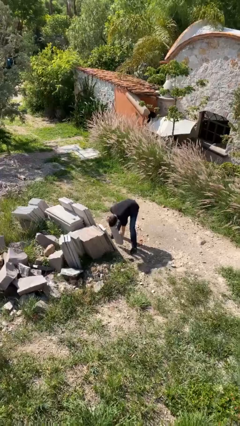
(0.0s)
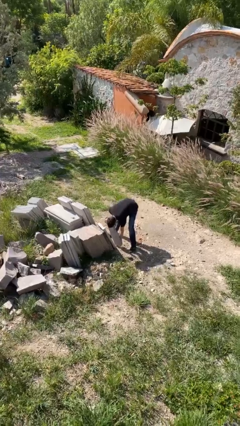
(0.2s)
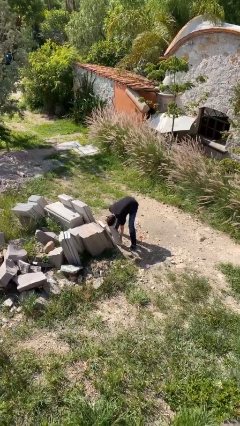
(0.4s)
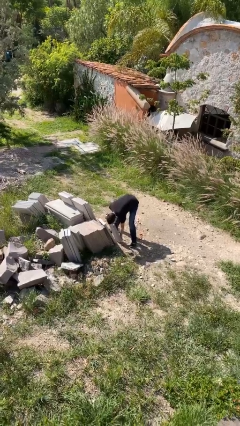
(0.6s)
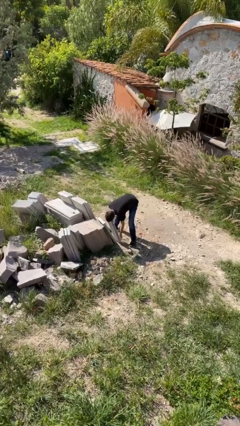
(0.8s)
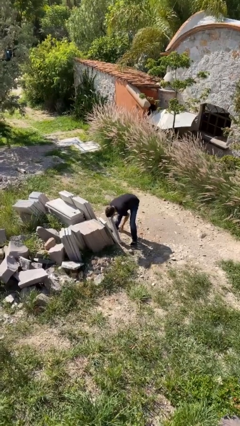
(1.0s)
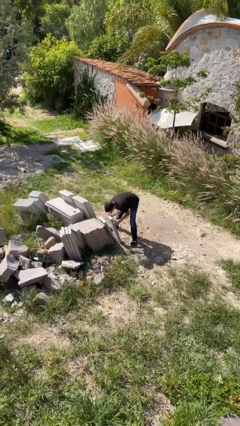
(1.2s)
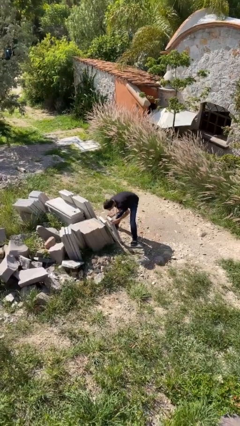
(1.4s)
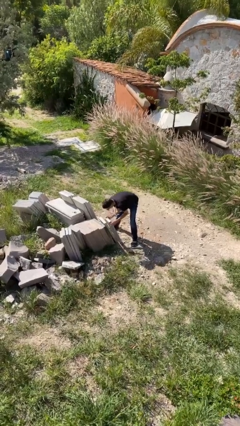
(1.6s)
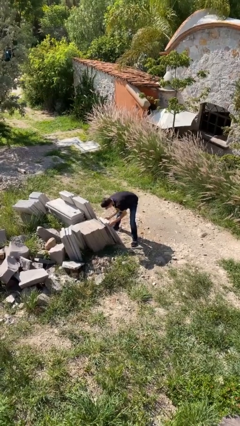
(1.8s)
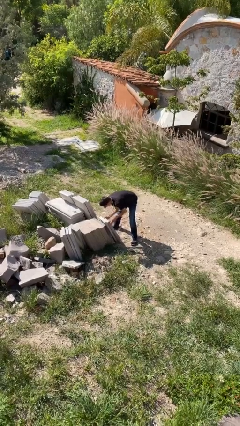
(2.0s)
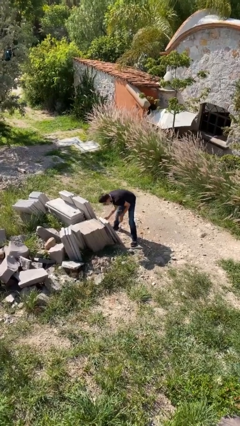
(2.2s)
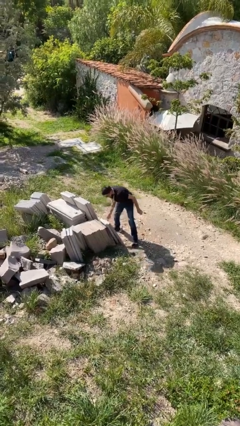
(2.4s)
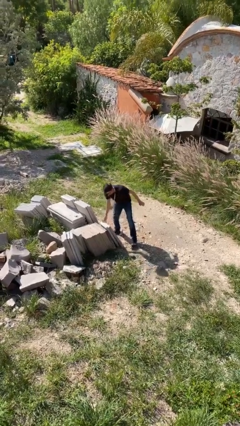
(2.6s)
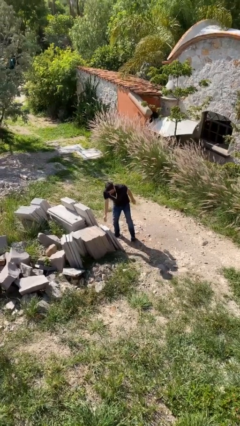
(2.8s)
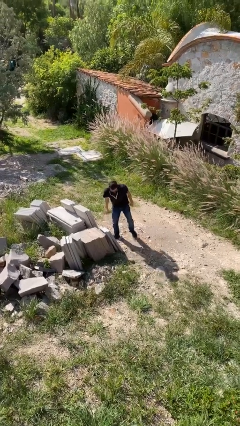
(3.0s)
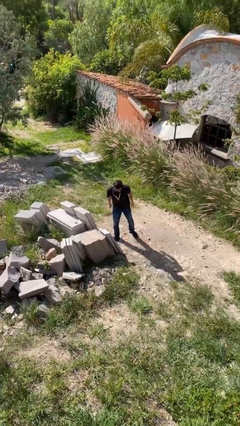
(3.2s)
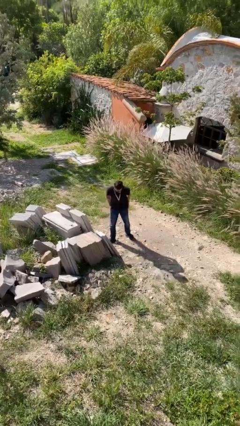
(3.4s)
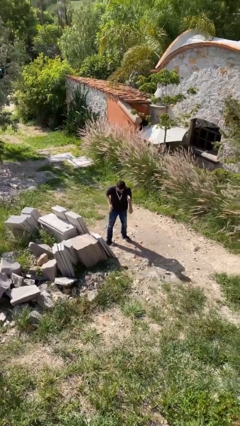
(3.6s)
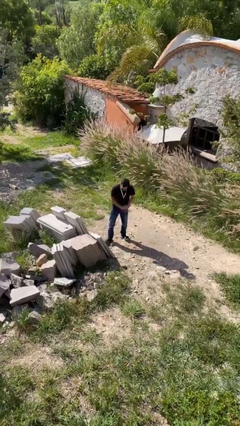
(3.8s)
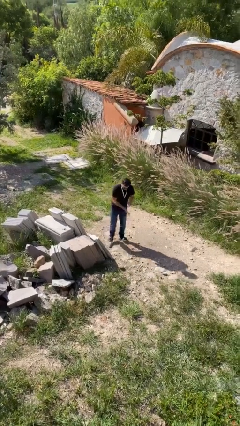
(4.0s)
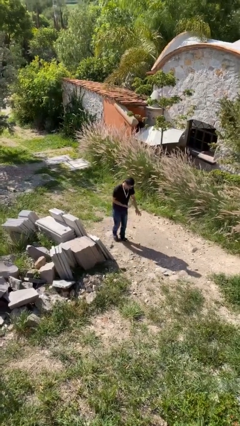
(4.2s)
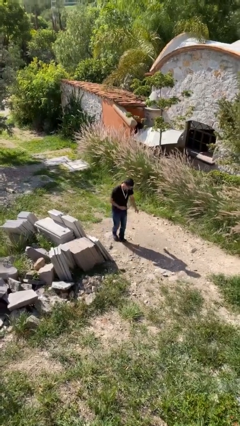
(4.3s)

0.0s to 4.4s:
person puts down object on floor

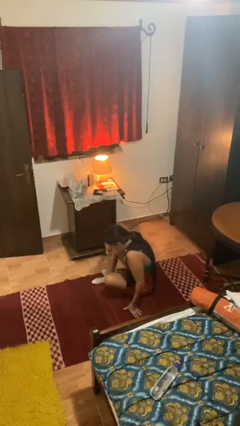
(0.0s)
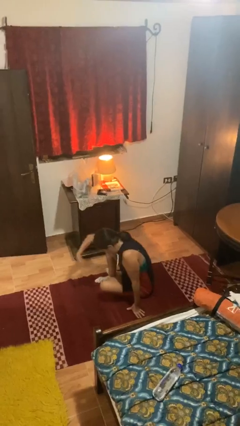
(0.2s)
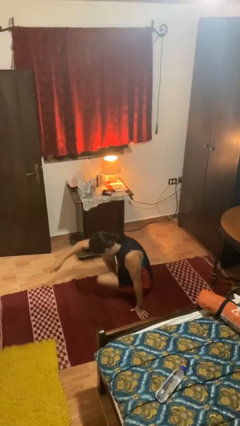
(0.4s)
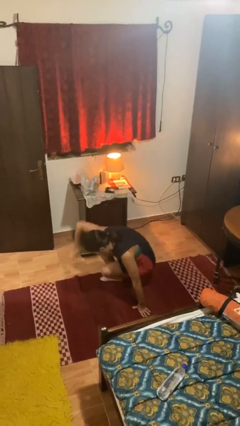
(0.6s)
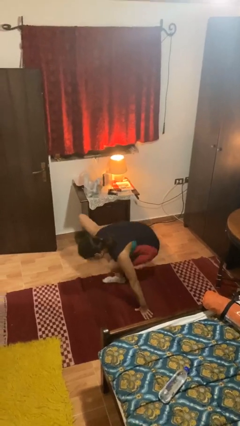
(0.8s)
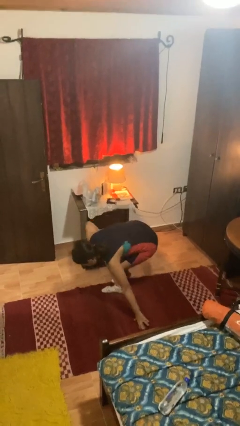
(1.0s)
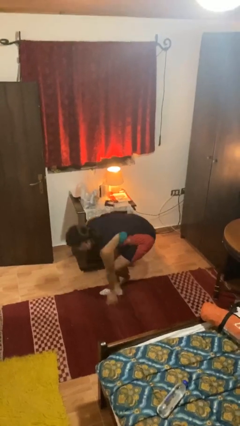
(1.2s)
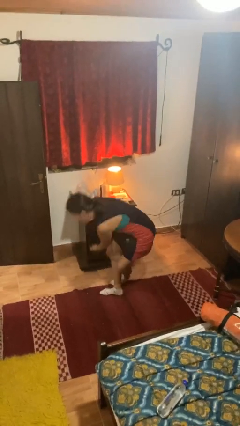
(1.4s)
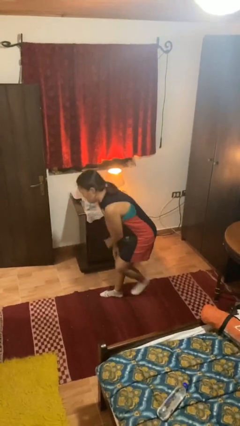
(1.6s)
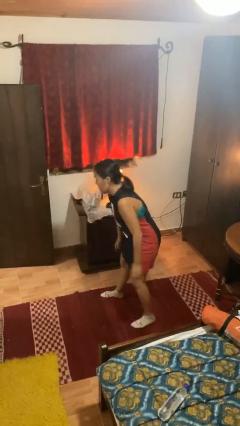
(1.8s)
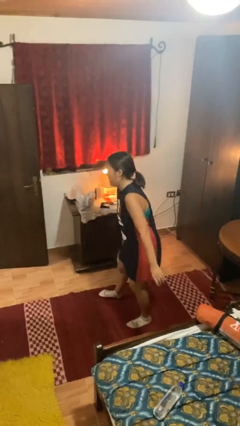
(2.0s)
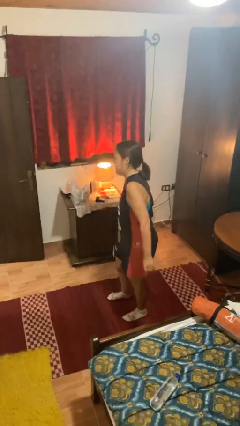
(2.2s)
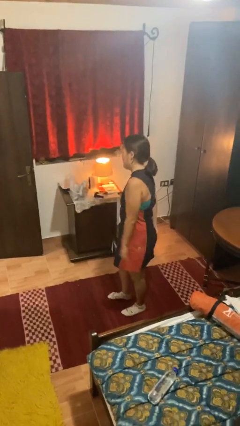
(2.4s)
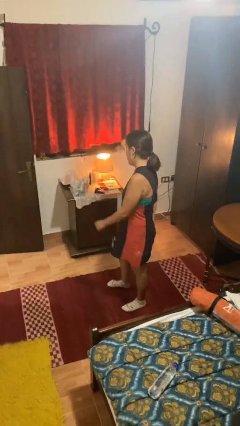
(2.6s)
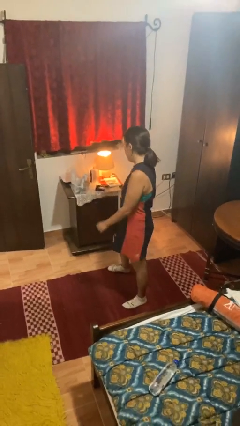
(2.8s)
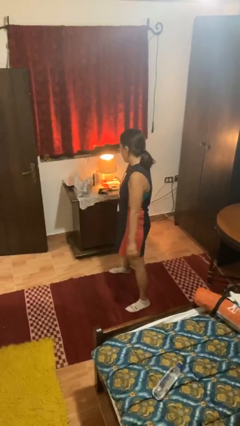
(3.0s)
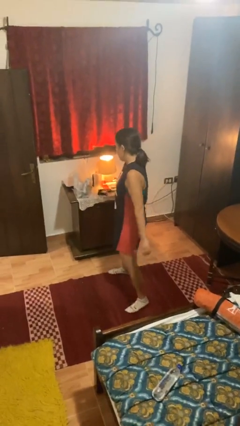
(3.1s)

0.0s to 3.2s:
person stands up from floor

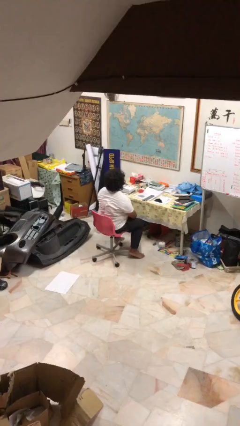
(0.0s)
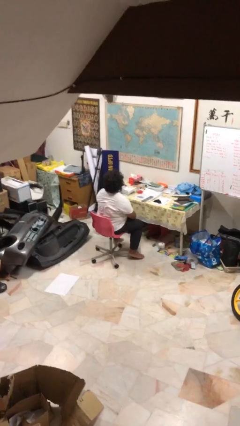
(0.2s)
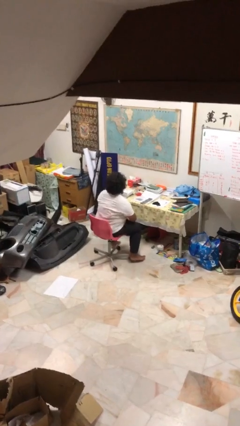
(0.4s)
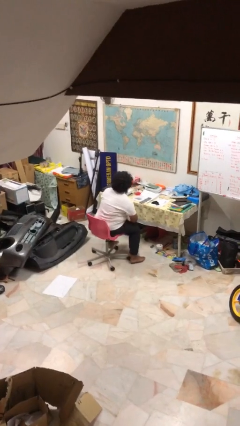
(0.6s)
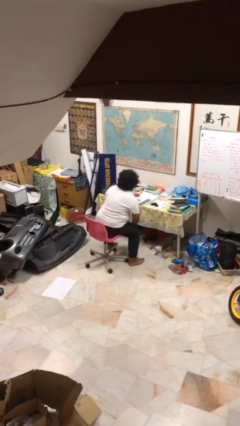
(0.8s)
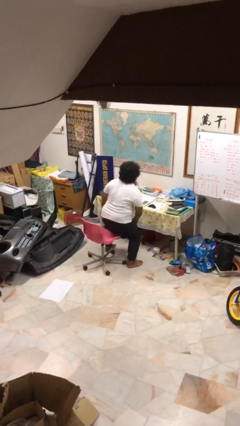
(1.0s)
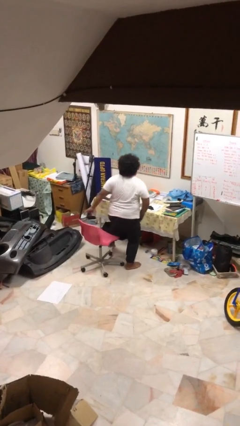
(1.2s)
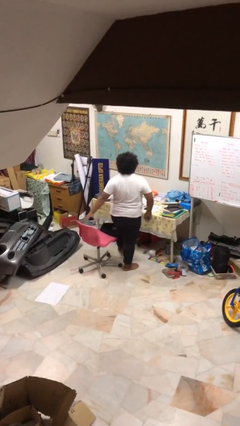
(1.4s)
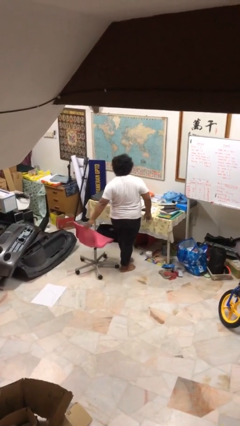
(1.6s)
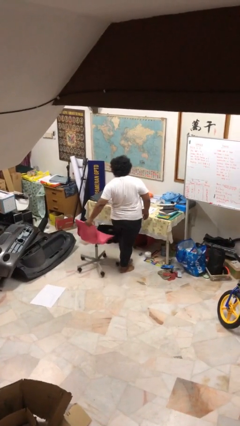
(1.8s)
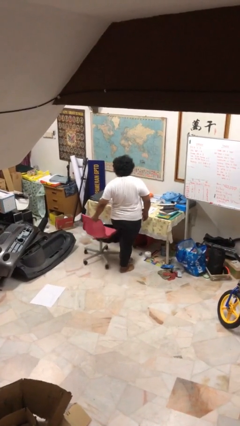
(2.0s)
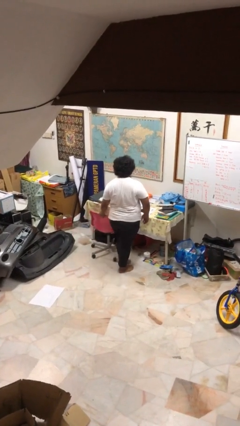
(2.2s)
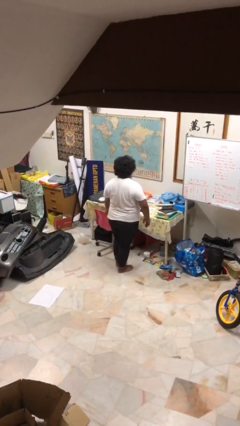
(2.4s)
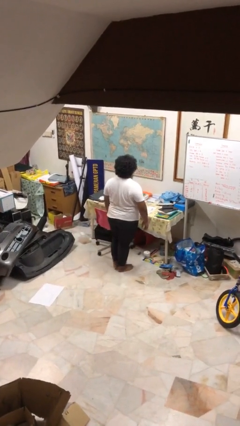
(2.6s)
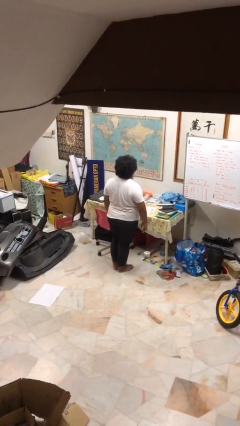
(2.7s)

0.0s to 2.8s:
person stands up

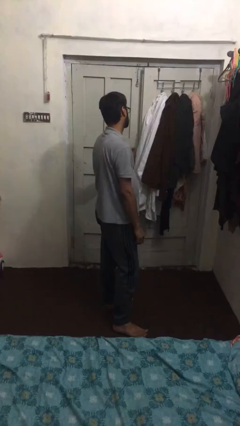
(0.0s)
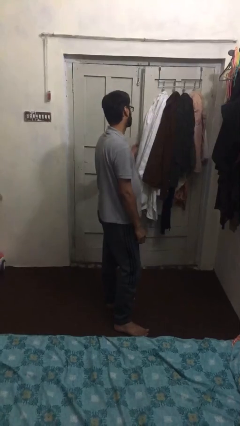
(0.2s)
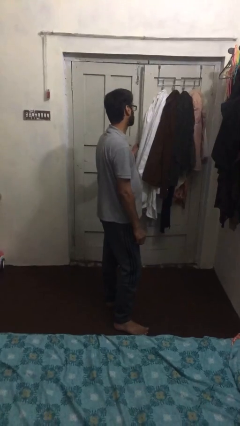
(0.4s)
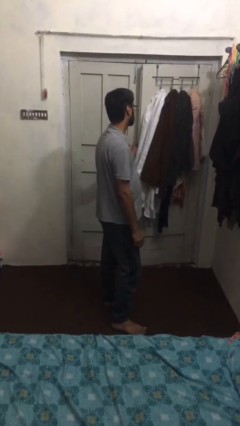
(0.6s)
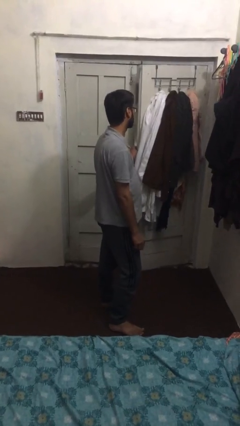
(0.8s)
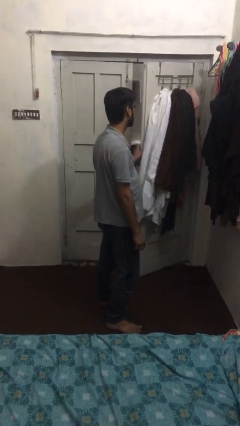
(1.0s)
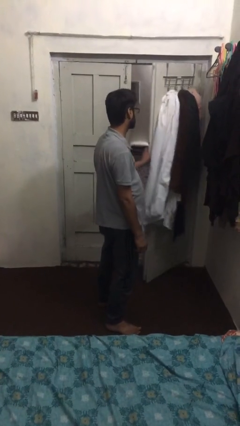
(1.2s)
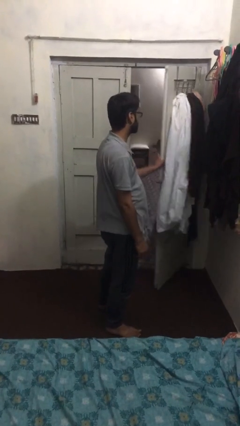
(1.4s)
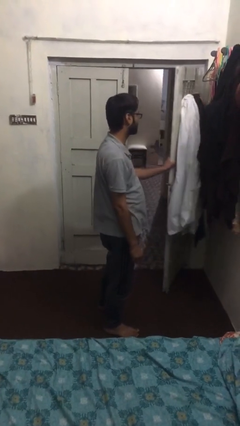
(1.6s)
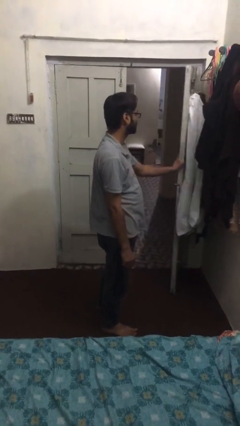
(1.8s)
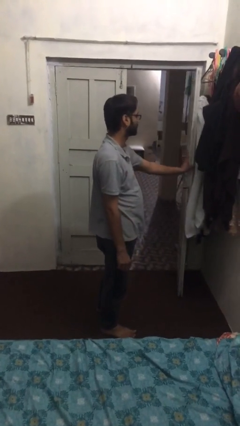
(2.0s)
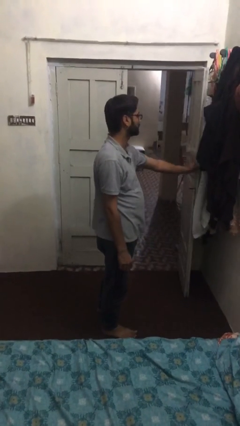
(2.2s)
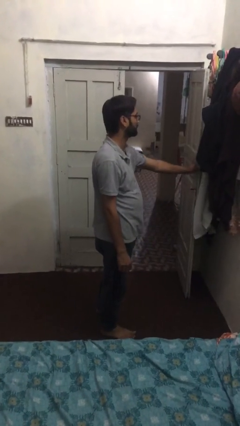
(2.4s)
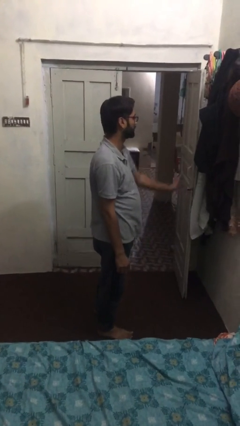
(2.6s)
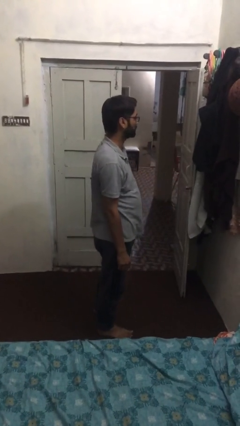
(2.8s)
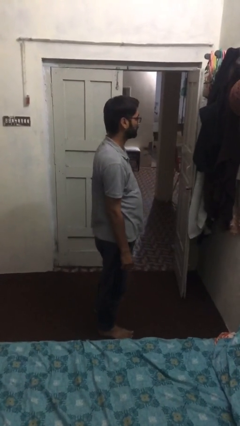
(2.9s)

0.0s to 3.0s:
person opens facility door

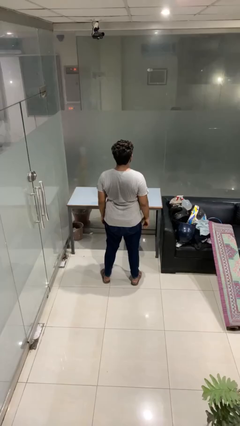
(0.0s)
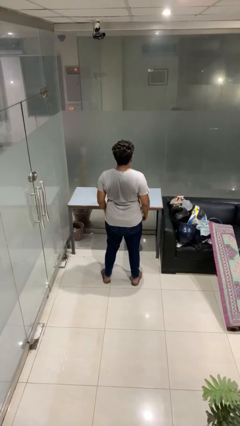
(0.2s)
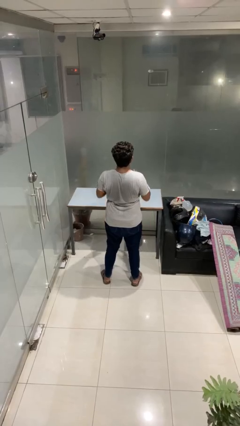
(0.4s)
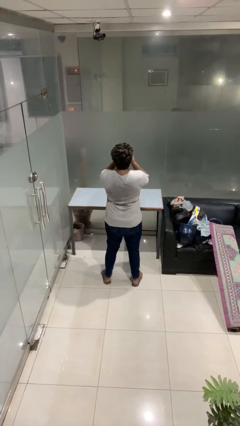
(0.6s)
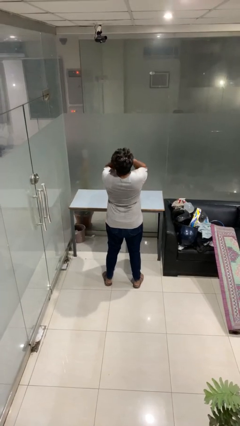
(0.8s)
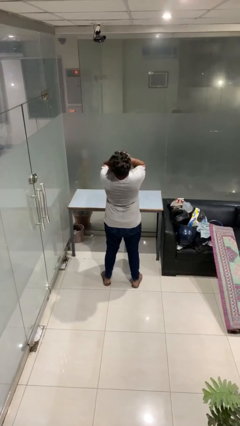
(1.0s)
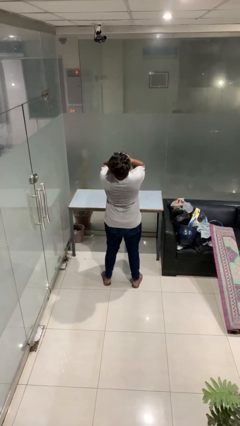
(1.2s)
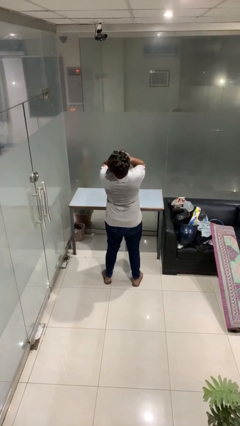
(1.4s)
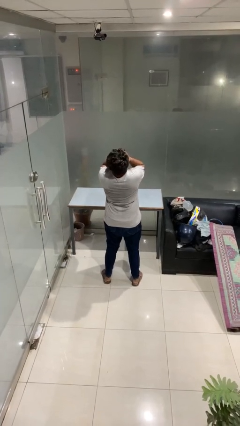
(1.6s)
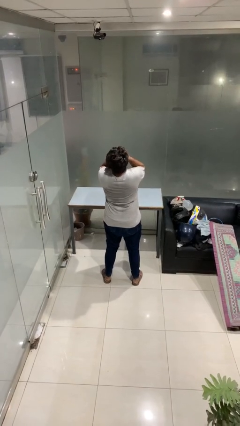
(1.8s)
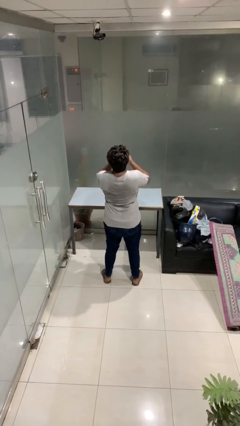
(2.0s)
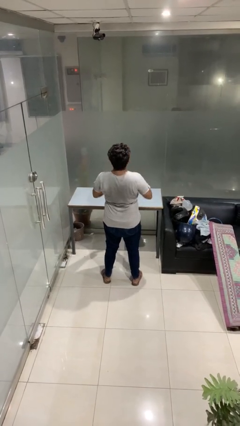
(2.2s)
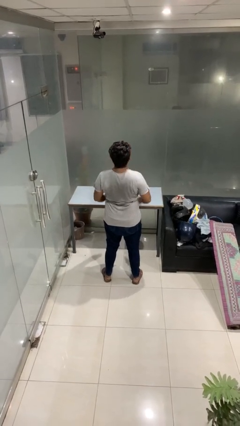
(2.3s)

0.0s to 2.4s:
person covers face with hands

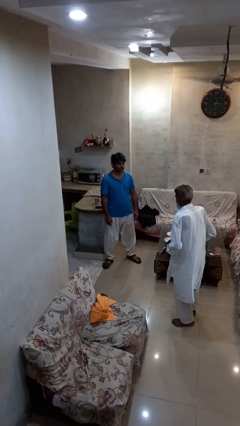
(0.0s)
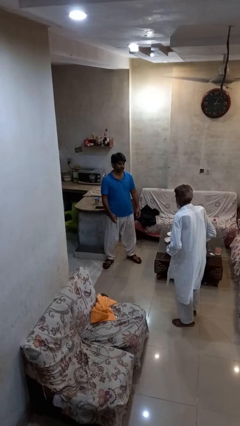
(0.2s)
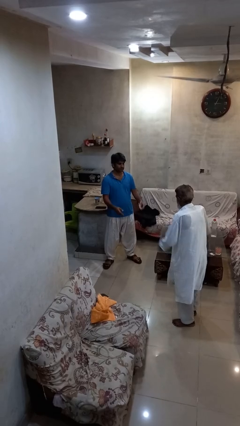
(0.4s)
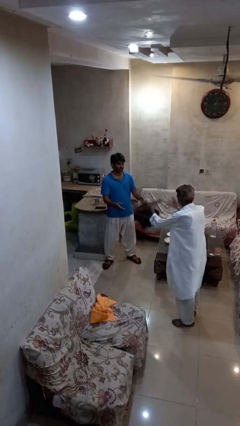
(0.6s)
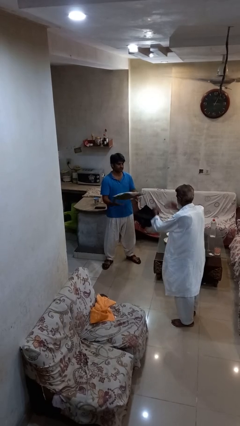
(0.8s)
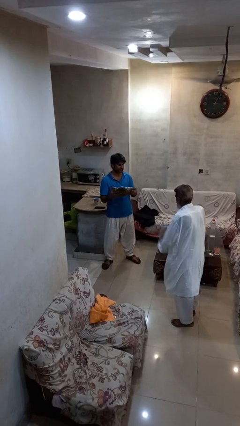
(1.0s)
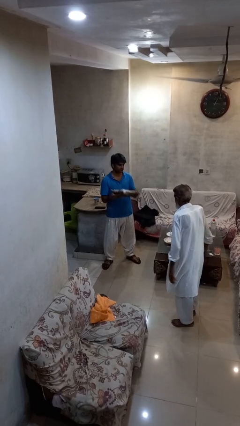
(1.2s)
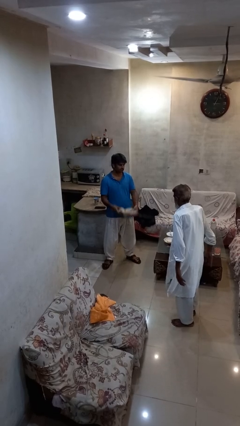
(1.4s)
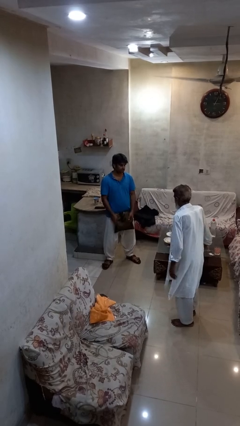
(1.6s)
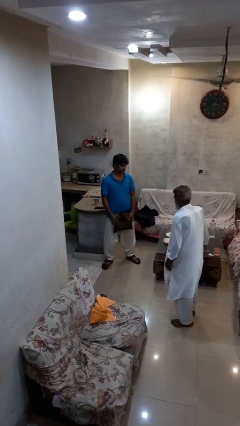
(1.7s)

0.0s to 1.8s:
person catches object from person
